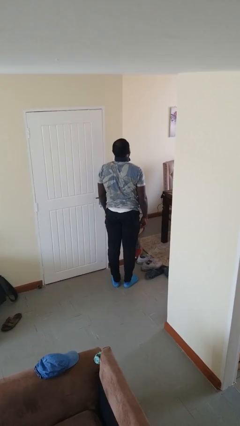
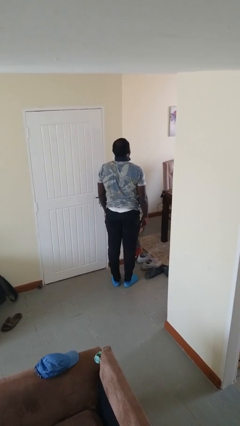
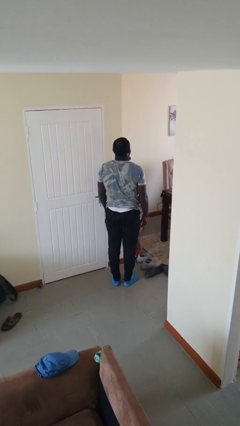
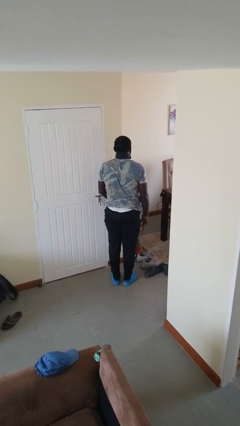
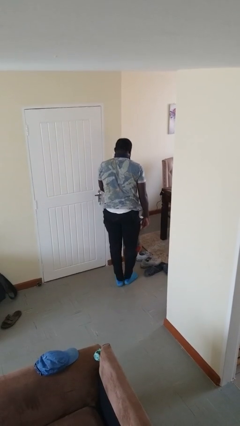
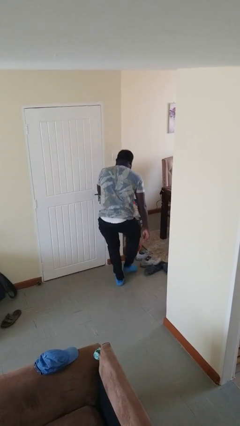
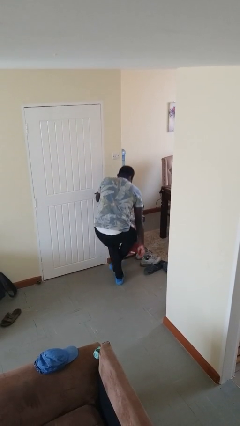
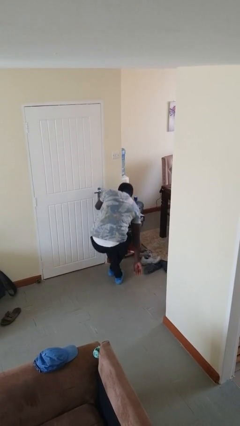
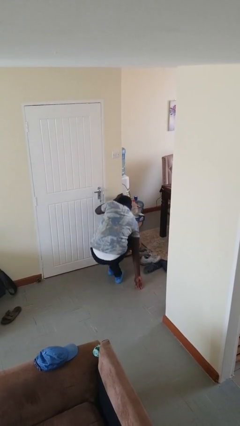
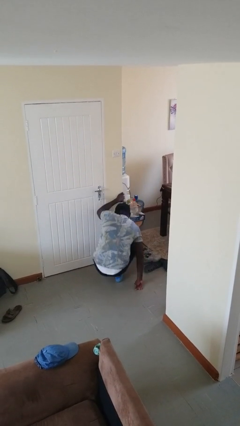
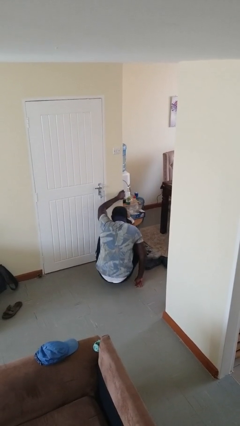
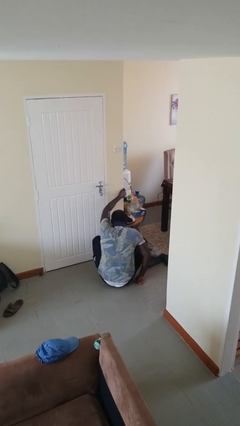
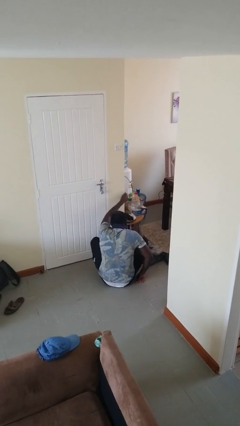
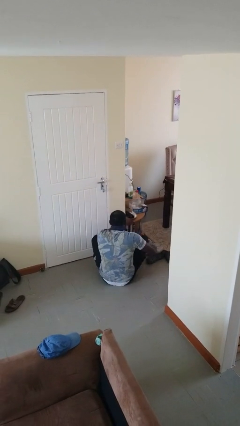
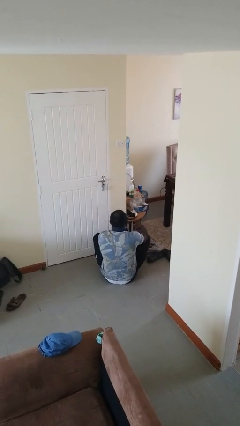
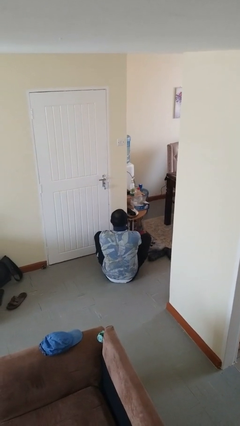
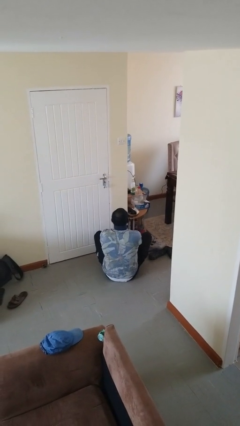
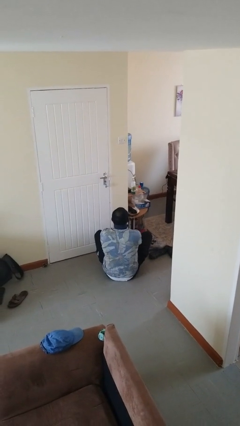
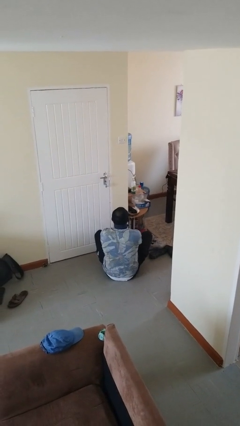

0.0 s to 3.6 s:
person sits crisscross

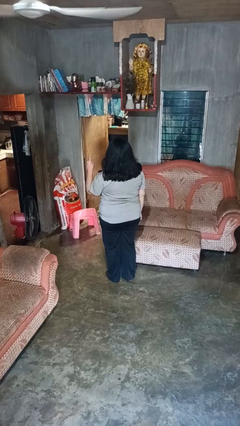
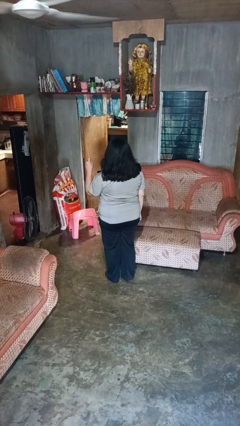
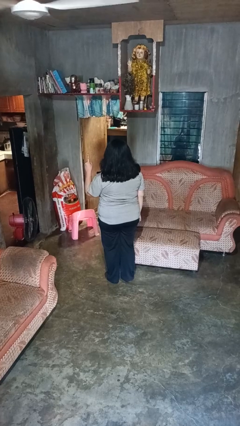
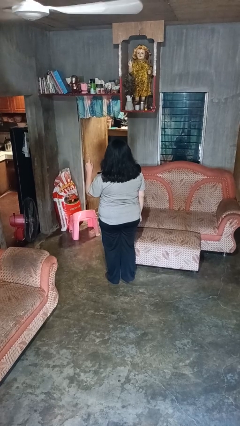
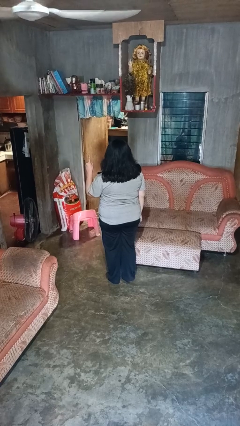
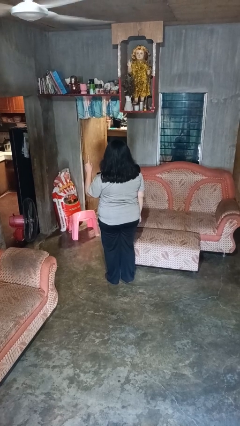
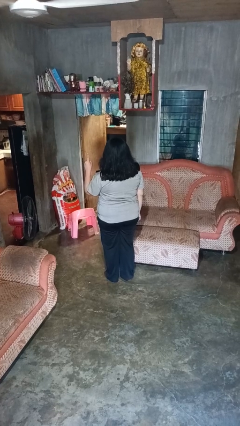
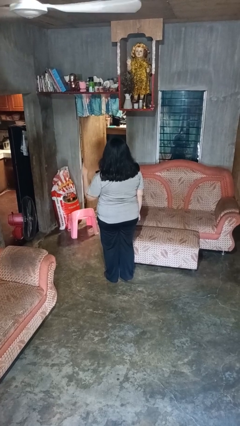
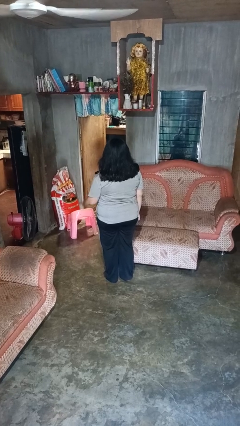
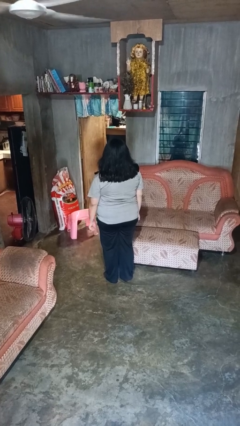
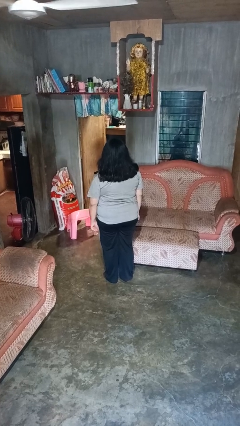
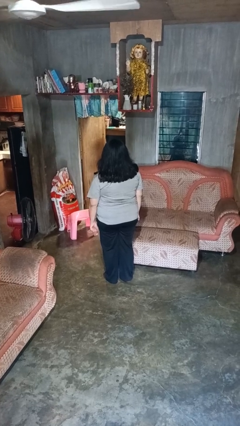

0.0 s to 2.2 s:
person gestures number one

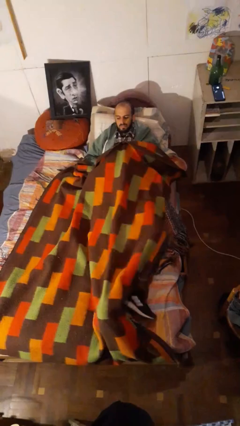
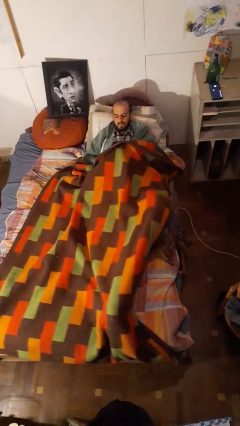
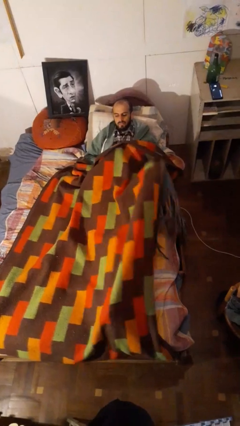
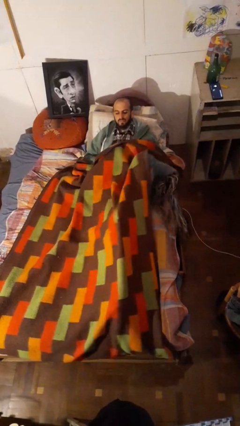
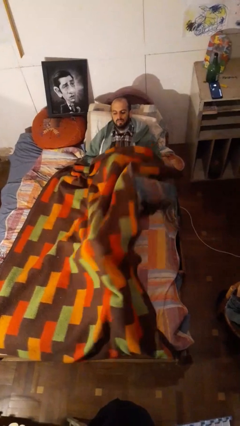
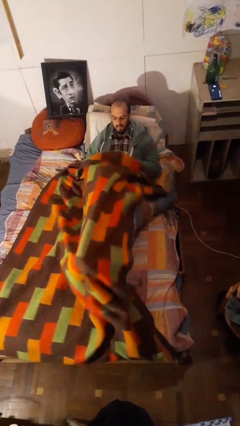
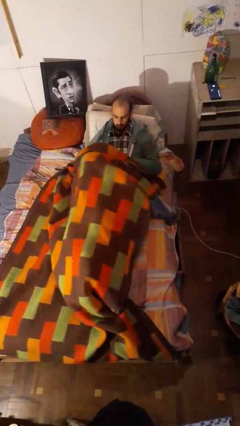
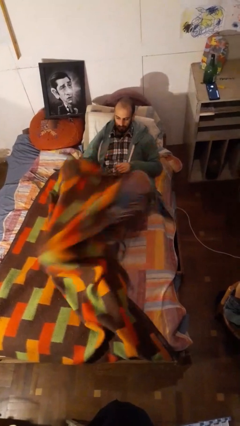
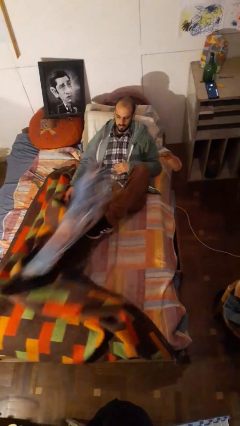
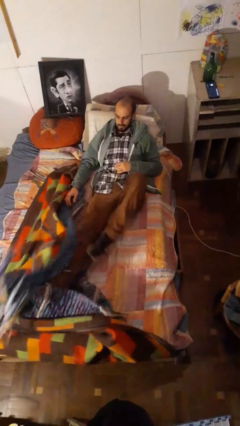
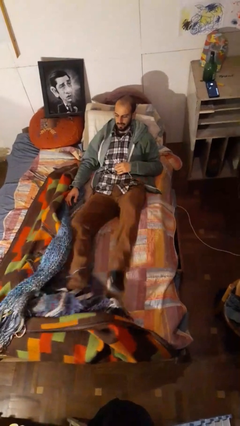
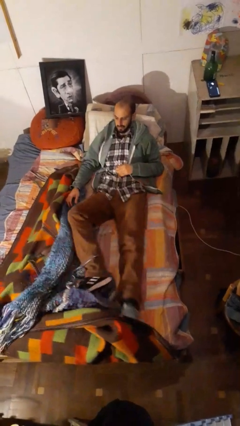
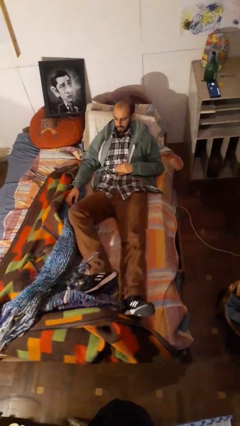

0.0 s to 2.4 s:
person uncovers with bedsheets

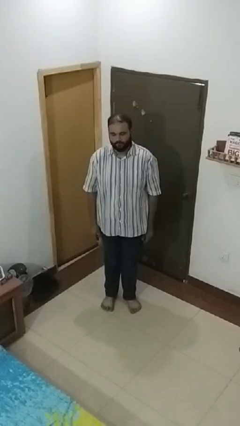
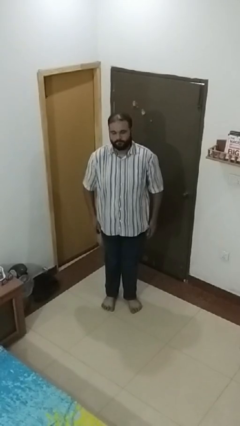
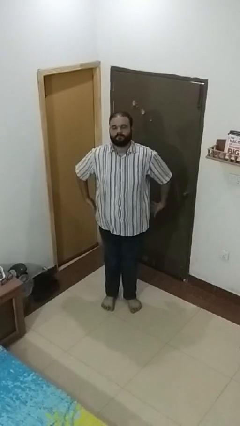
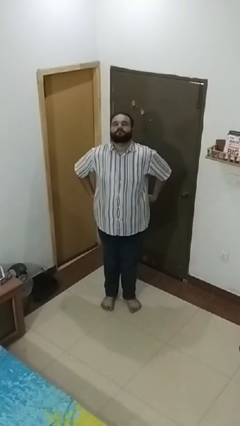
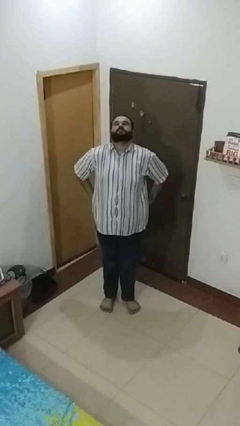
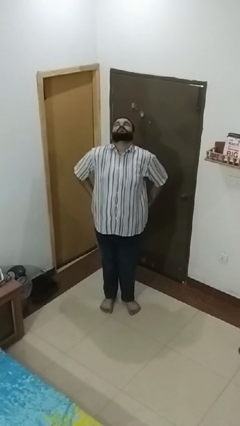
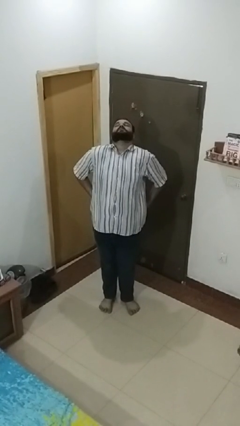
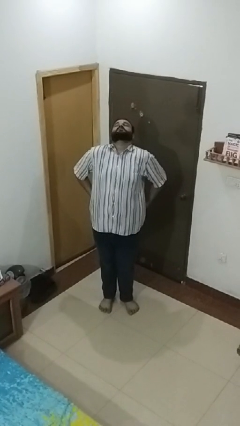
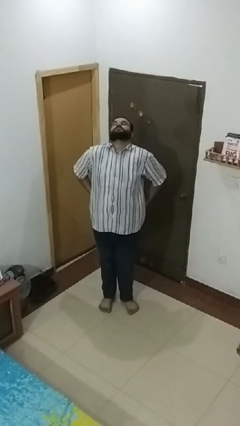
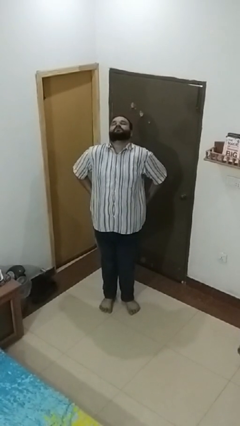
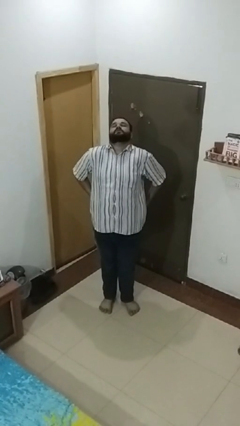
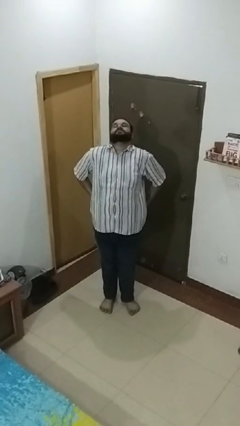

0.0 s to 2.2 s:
person stretches back

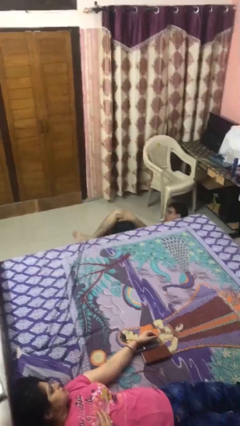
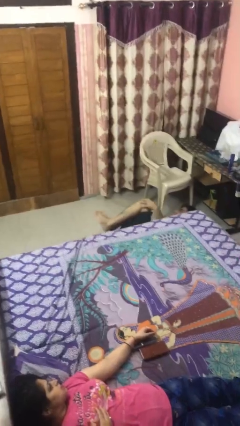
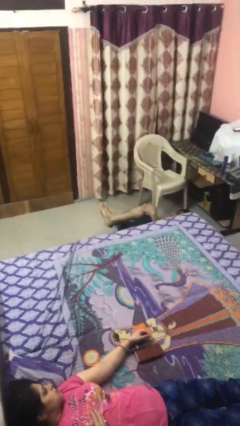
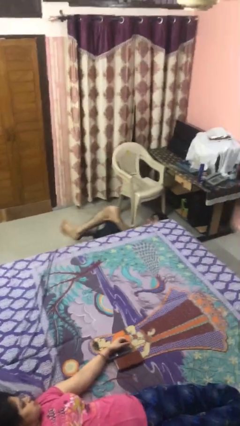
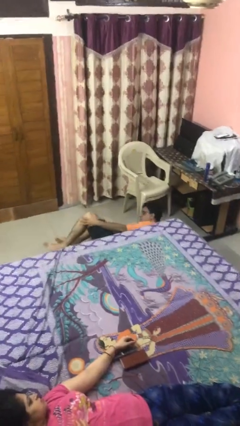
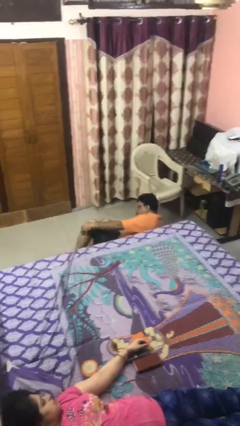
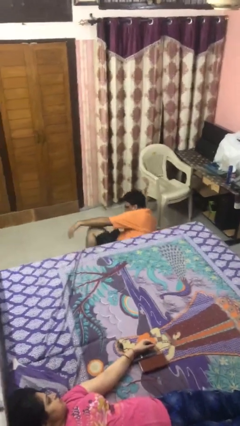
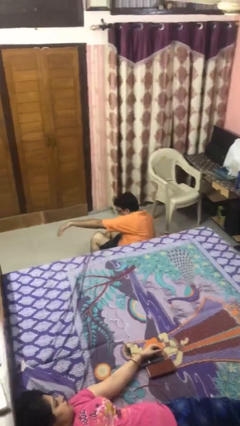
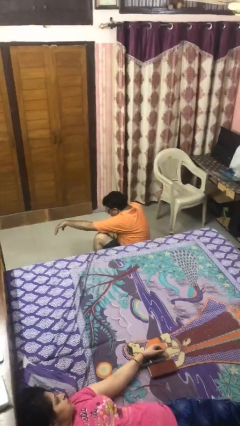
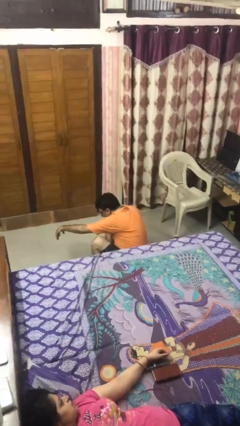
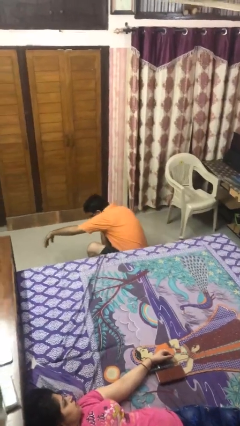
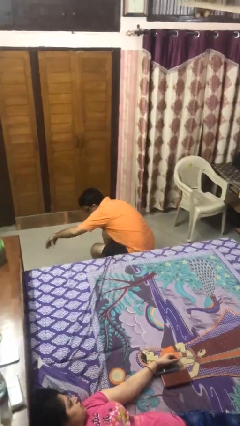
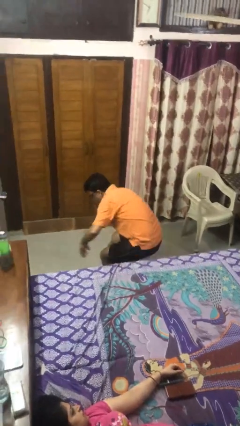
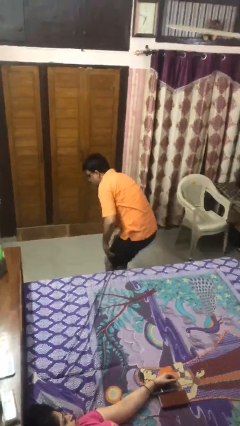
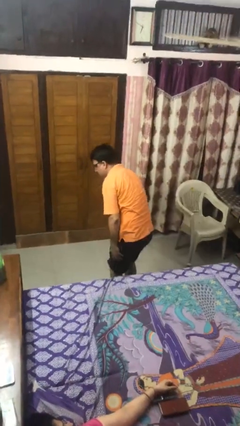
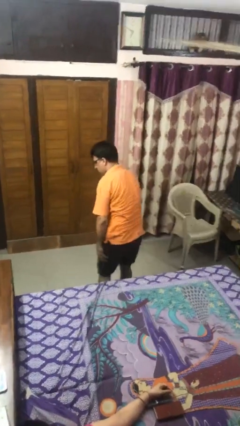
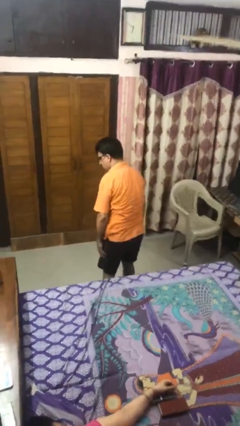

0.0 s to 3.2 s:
person stands up from floor

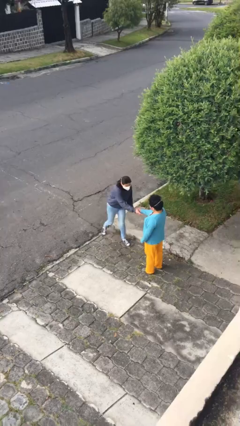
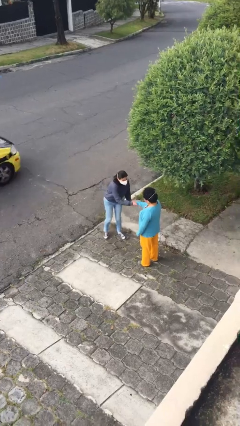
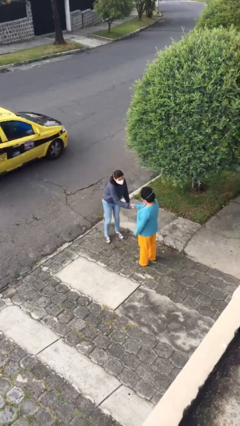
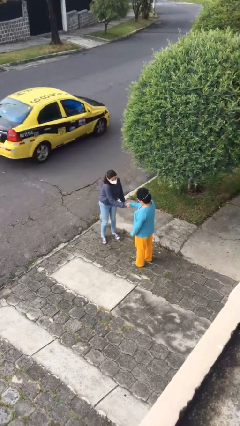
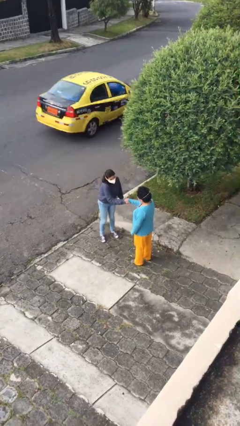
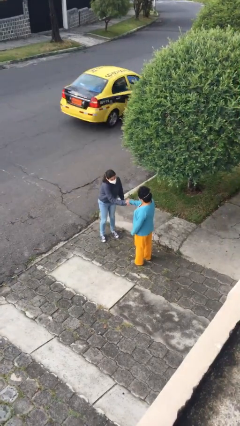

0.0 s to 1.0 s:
person shakes hand

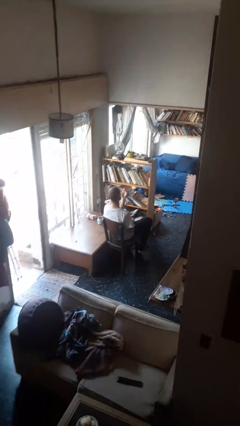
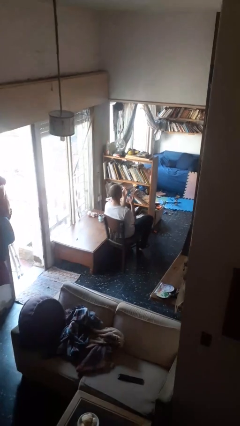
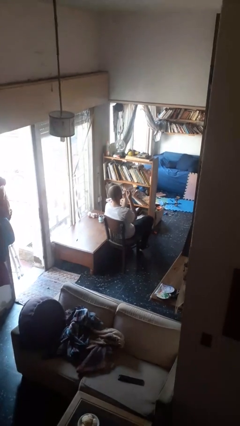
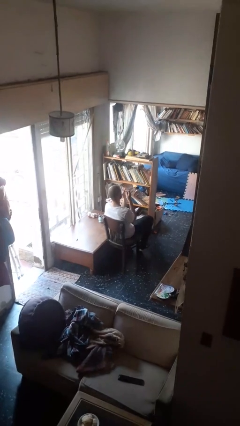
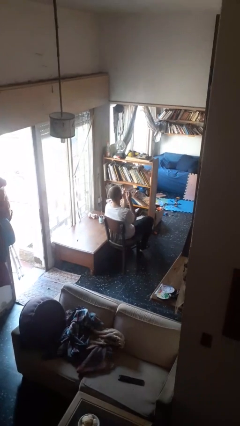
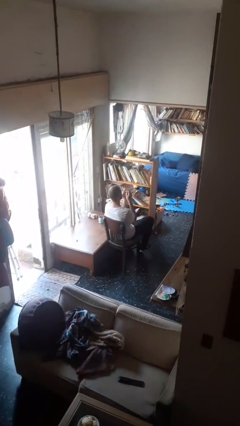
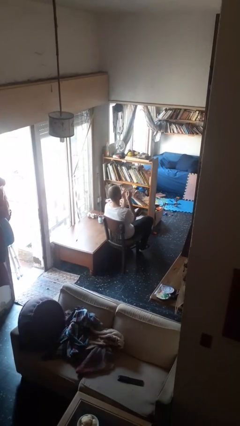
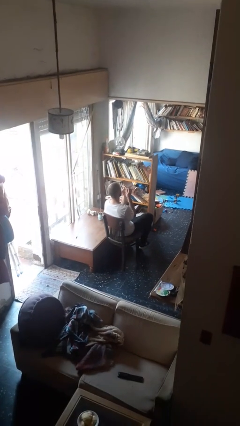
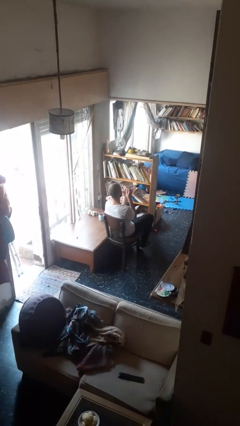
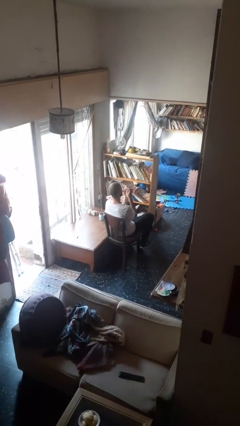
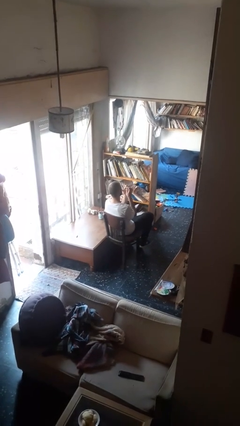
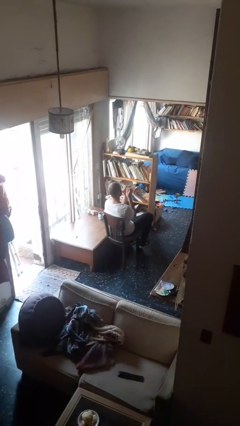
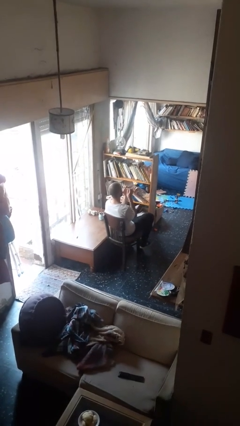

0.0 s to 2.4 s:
person files fingernails
